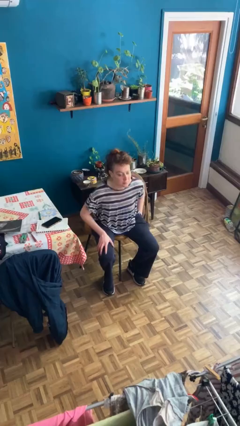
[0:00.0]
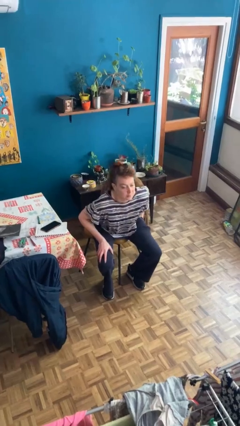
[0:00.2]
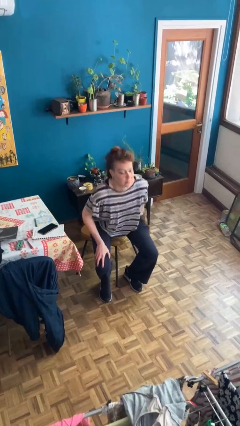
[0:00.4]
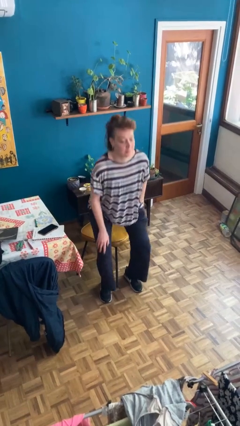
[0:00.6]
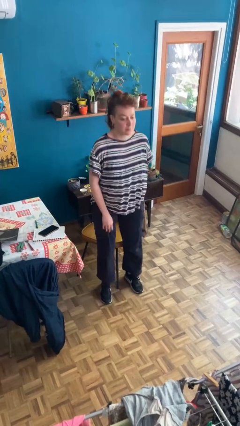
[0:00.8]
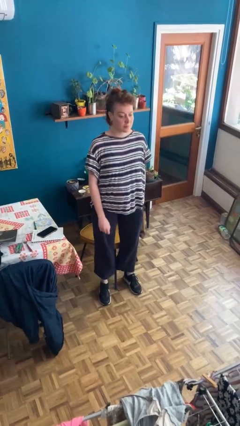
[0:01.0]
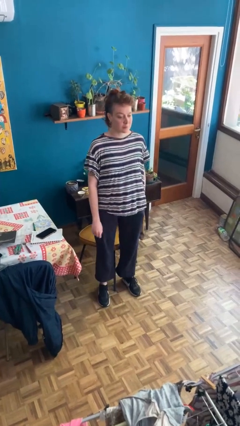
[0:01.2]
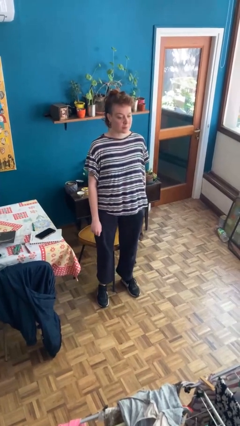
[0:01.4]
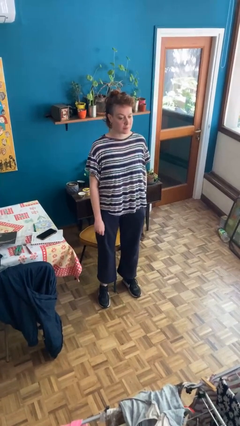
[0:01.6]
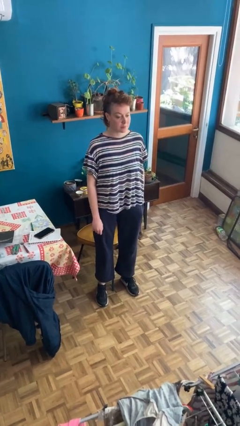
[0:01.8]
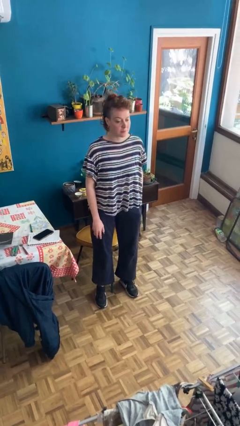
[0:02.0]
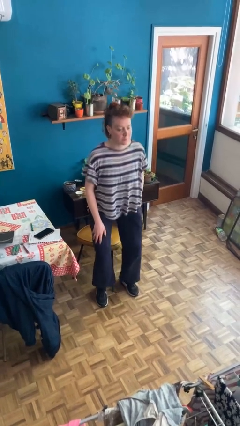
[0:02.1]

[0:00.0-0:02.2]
person stands up

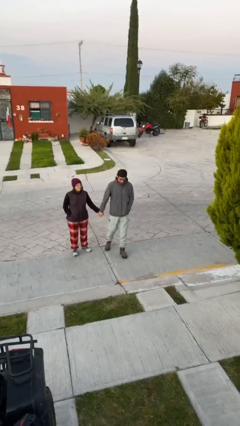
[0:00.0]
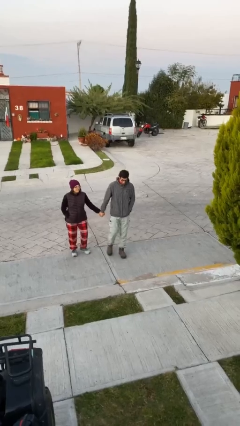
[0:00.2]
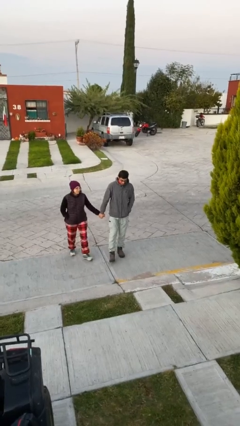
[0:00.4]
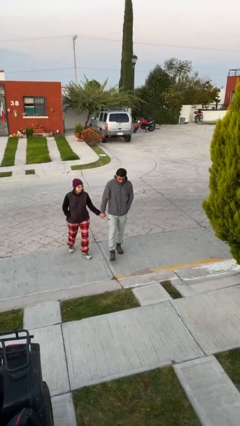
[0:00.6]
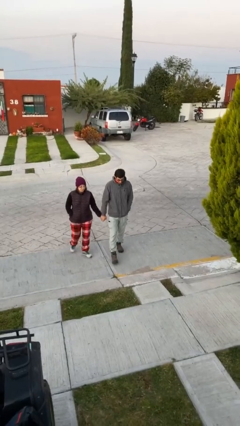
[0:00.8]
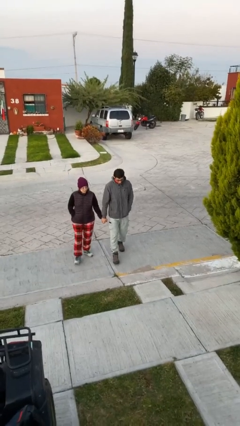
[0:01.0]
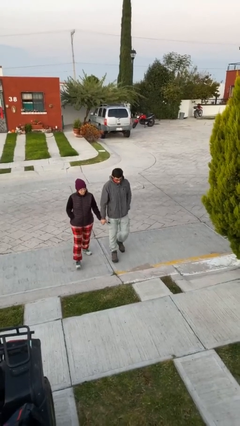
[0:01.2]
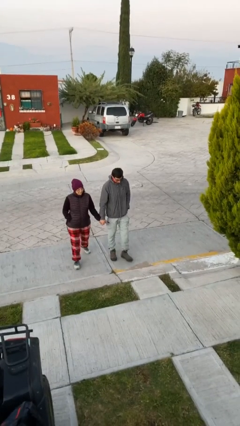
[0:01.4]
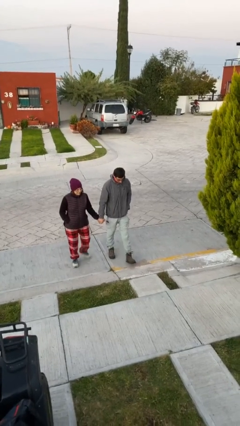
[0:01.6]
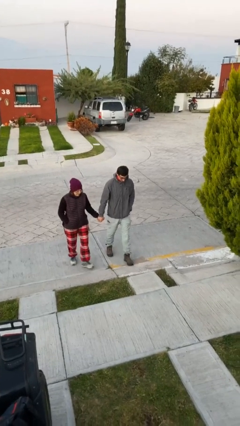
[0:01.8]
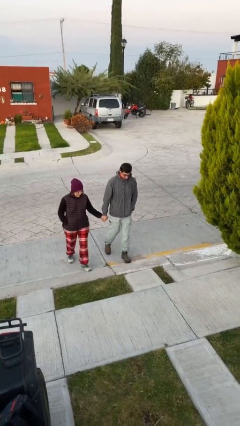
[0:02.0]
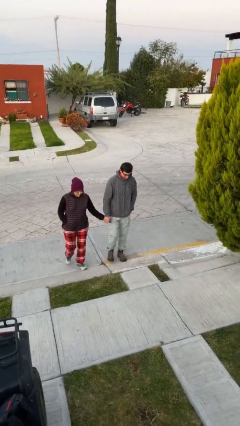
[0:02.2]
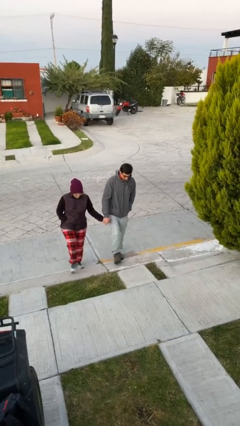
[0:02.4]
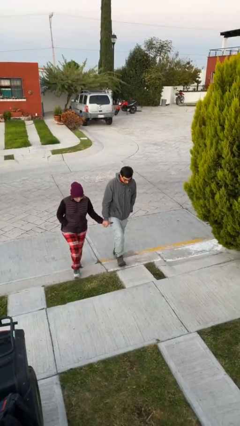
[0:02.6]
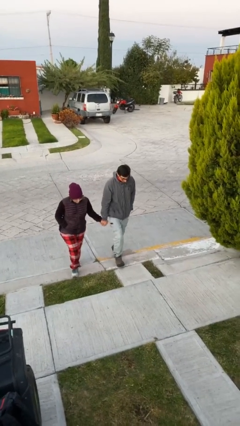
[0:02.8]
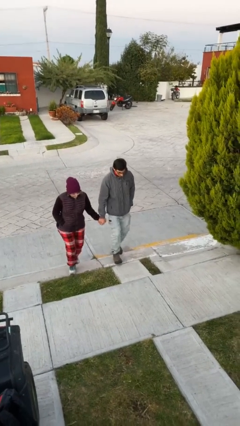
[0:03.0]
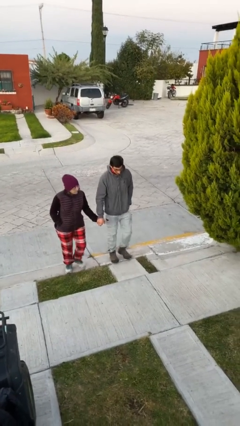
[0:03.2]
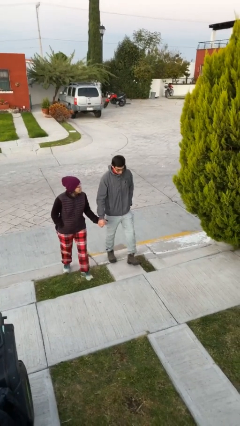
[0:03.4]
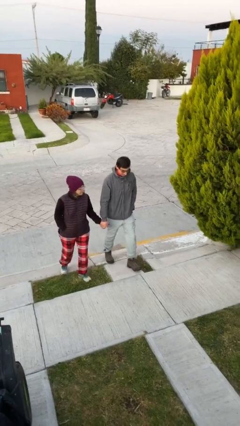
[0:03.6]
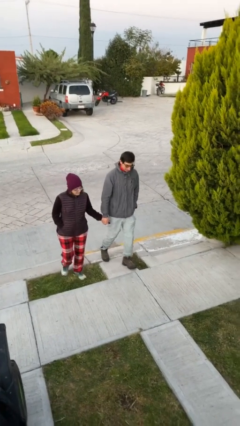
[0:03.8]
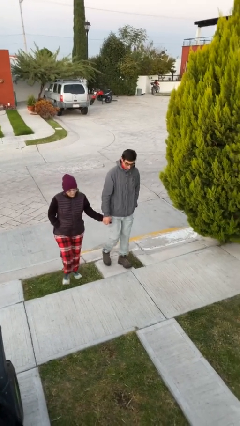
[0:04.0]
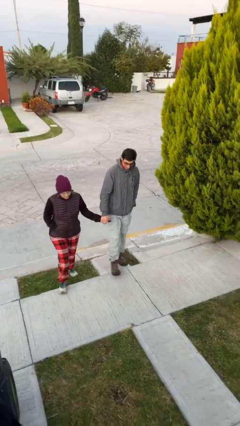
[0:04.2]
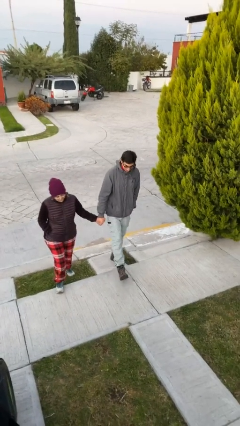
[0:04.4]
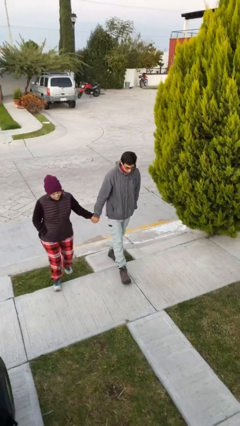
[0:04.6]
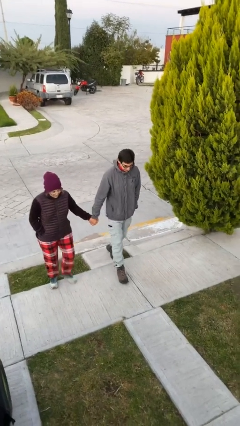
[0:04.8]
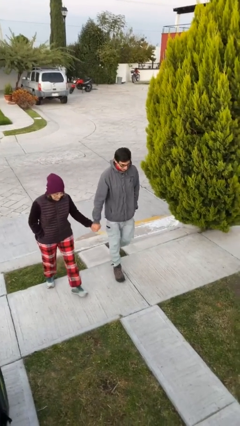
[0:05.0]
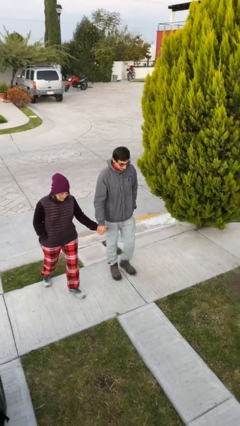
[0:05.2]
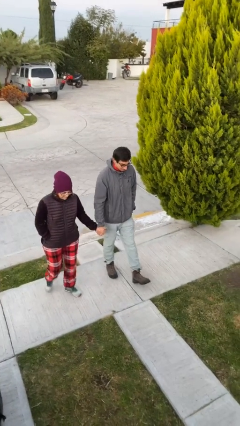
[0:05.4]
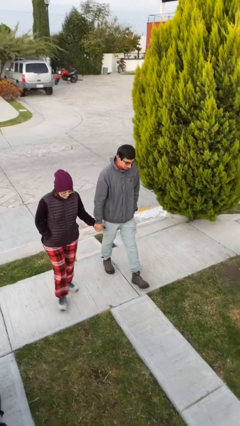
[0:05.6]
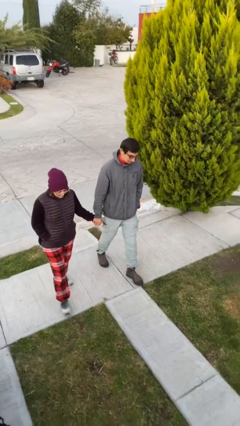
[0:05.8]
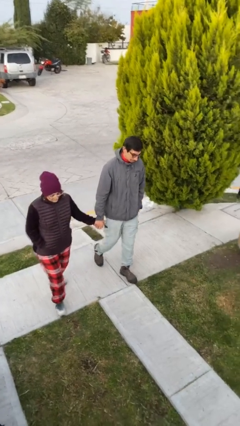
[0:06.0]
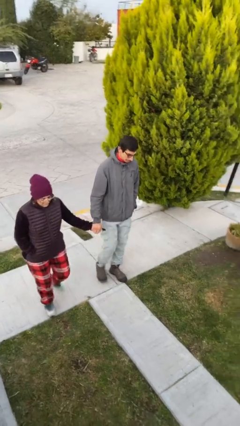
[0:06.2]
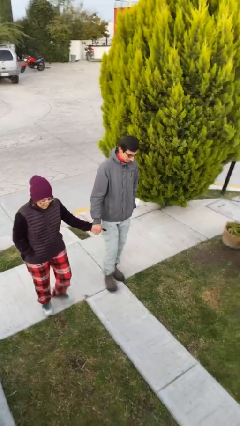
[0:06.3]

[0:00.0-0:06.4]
person holds hand

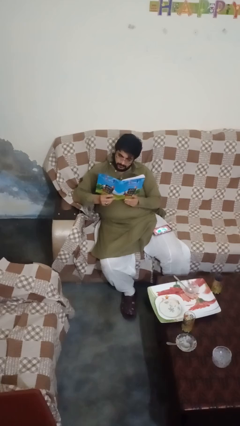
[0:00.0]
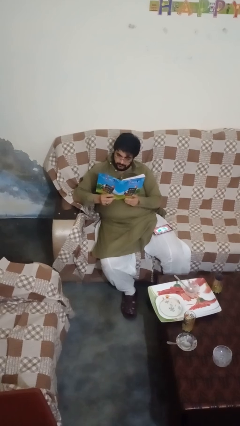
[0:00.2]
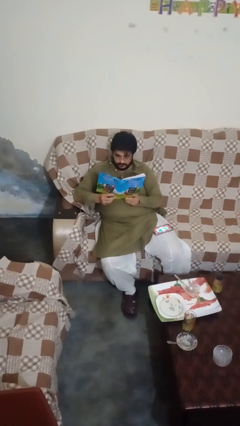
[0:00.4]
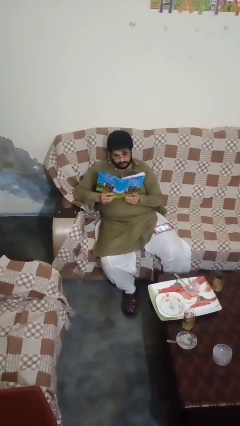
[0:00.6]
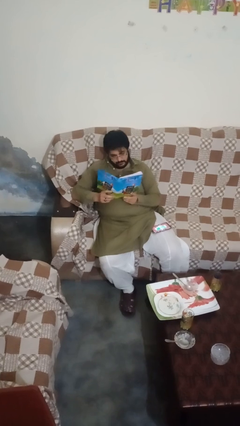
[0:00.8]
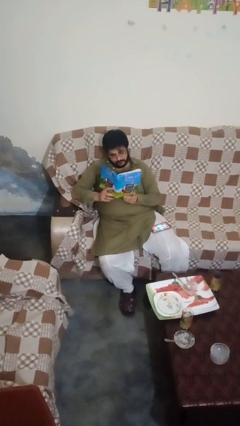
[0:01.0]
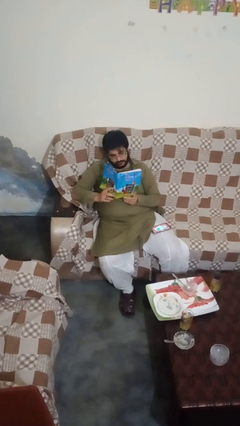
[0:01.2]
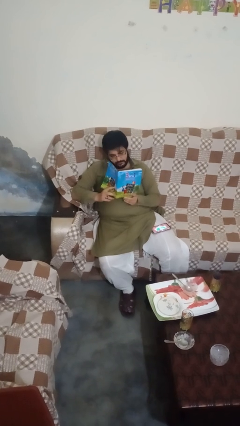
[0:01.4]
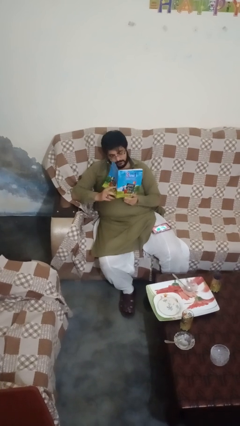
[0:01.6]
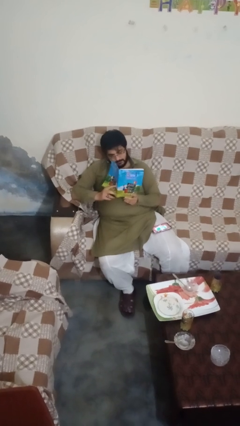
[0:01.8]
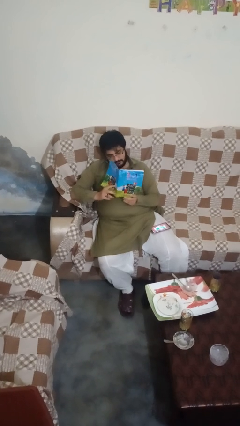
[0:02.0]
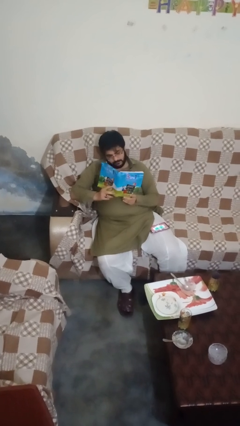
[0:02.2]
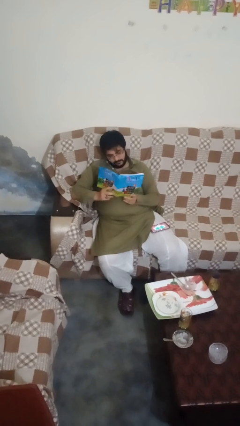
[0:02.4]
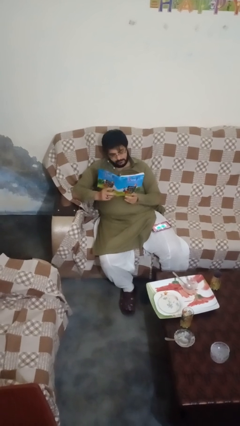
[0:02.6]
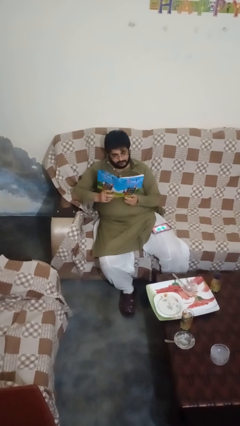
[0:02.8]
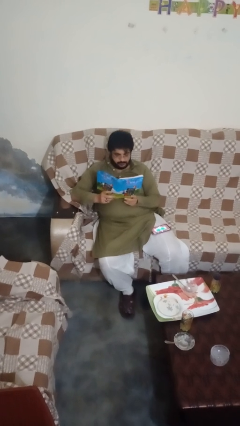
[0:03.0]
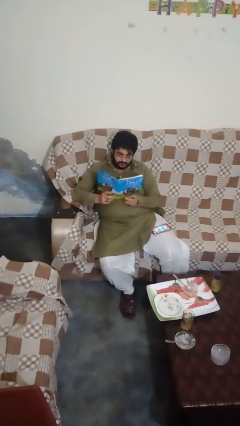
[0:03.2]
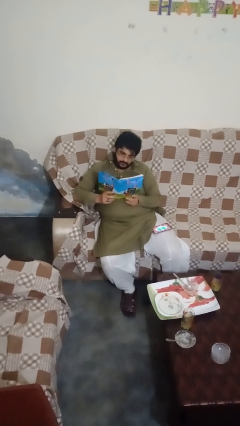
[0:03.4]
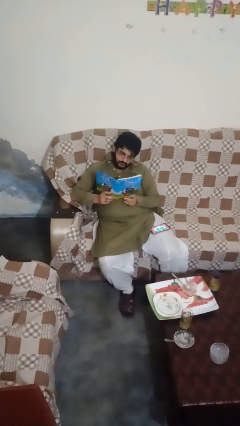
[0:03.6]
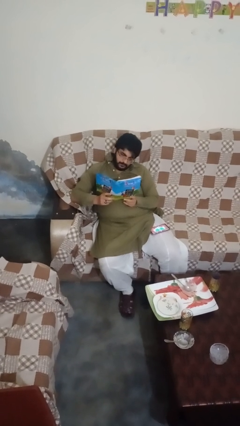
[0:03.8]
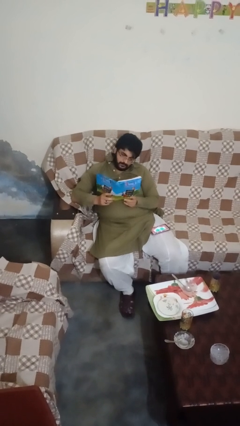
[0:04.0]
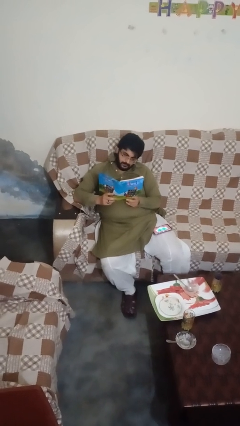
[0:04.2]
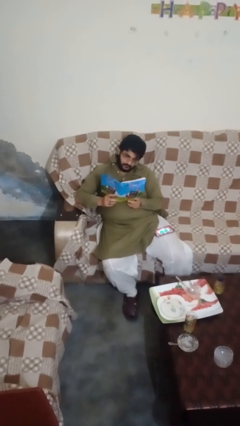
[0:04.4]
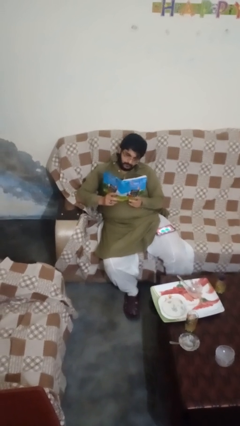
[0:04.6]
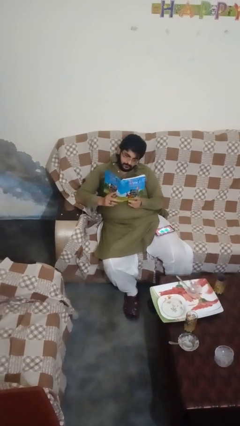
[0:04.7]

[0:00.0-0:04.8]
person reads magazine

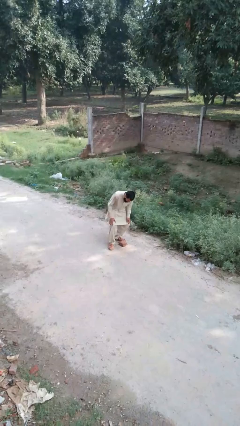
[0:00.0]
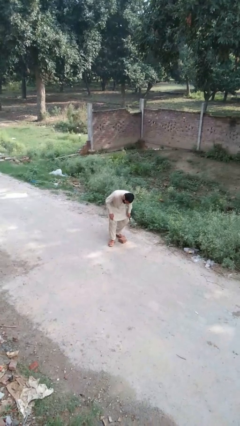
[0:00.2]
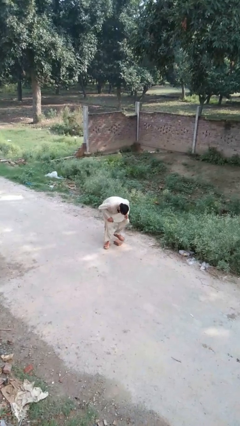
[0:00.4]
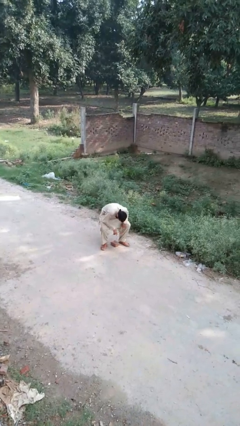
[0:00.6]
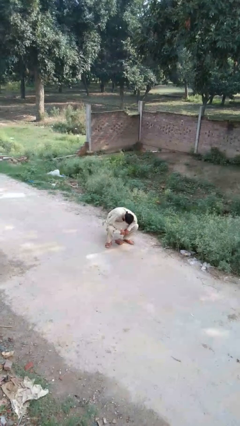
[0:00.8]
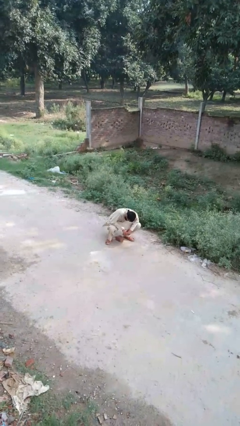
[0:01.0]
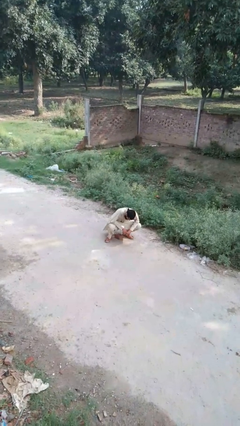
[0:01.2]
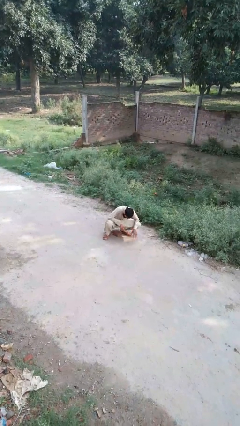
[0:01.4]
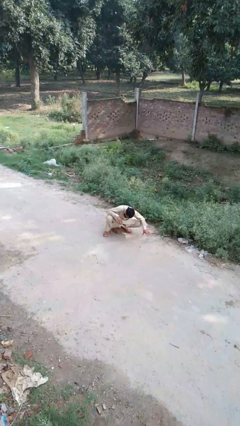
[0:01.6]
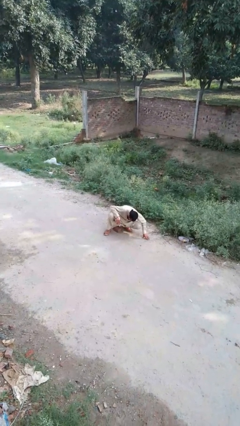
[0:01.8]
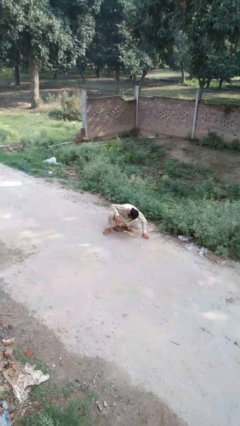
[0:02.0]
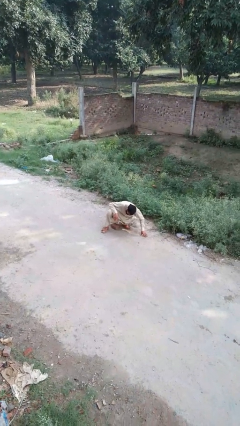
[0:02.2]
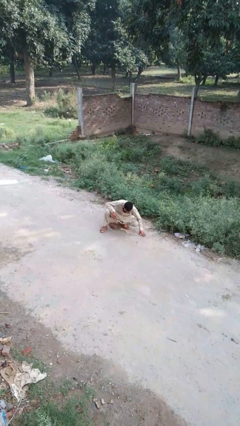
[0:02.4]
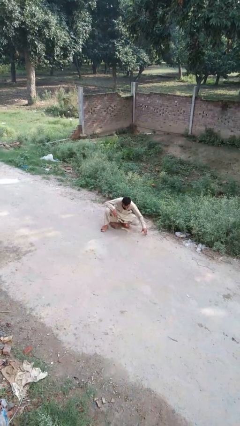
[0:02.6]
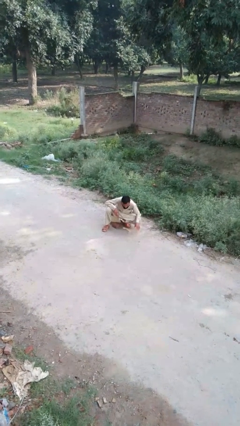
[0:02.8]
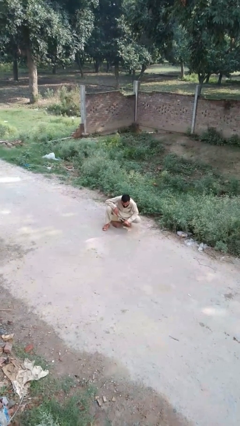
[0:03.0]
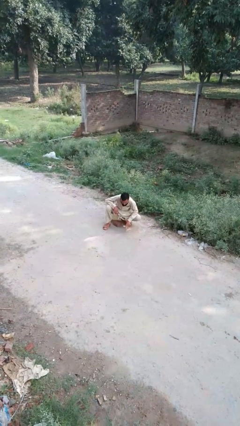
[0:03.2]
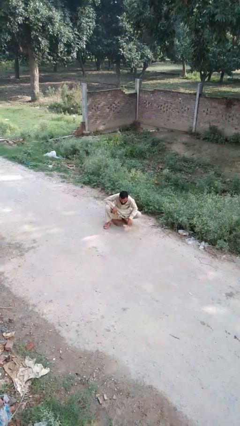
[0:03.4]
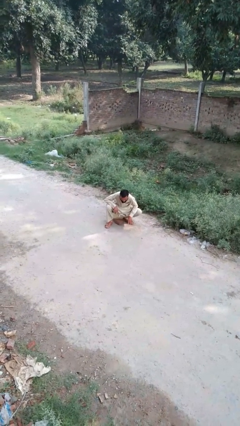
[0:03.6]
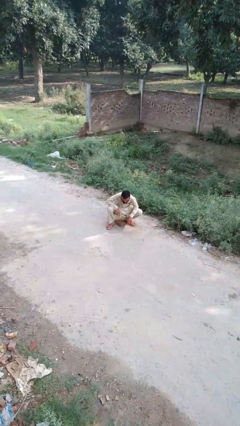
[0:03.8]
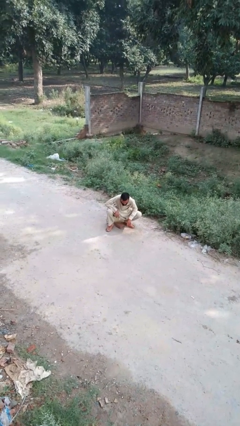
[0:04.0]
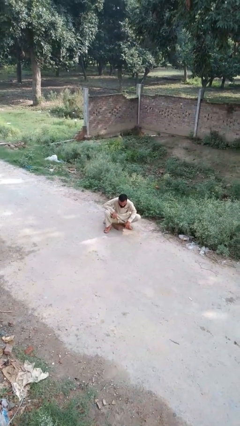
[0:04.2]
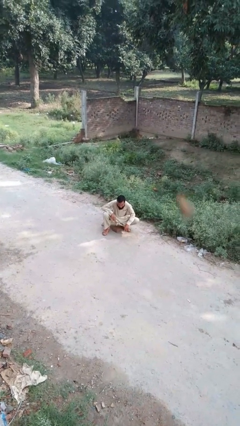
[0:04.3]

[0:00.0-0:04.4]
person lies down on floor
